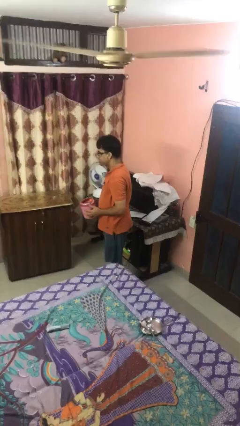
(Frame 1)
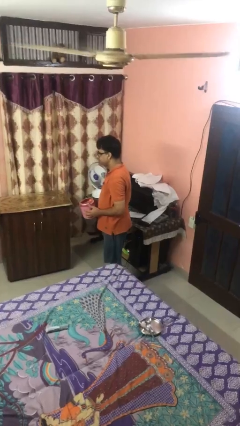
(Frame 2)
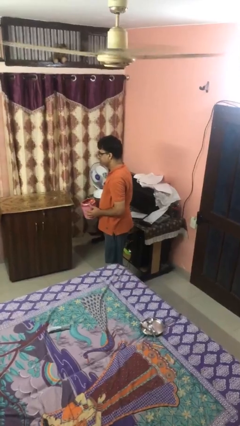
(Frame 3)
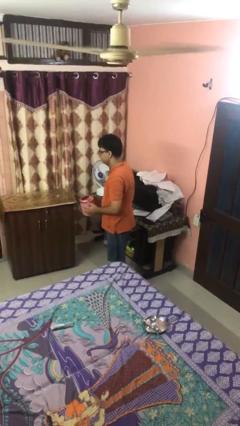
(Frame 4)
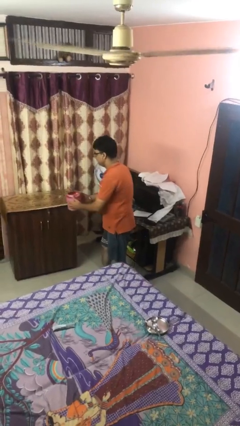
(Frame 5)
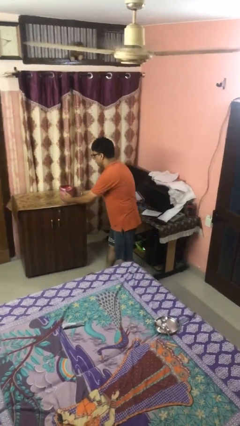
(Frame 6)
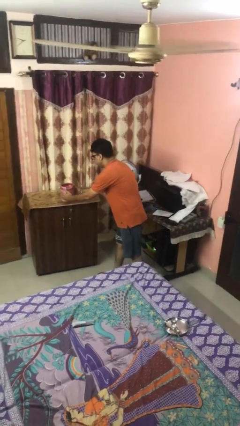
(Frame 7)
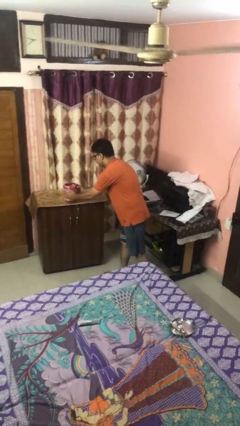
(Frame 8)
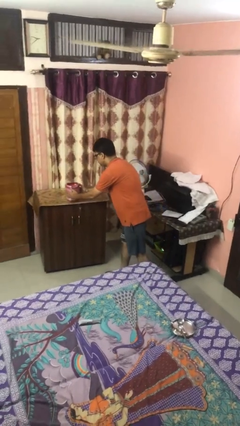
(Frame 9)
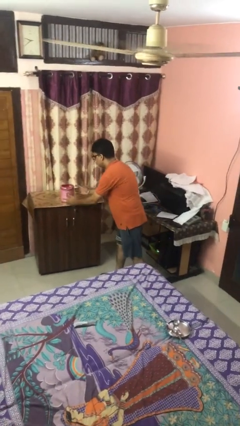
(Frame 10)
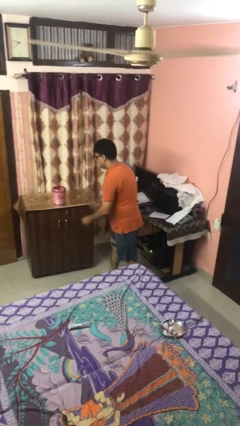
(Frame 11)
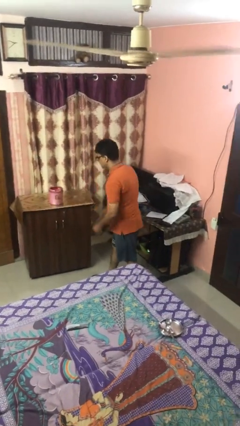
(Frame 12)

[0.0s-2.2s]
person puts down object on countertop

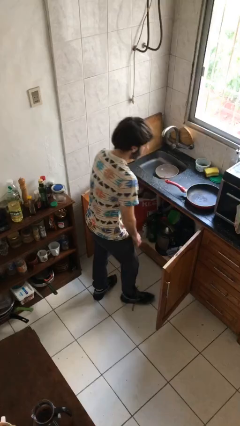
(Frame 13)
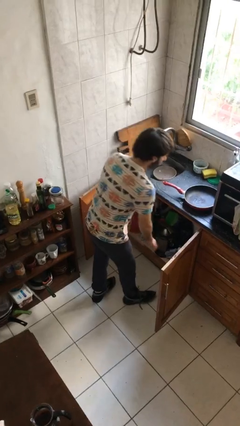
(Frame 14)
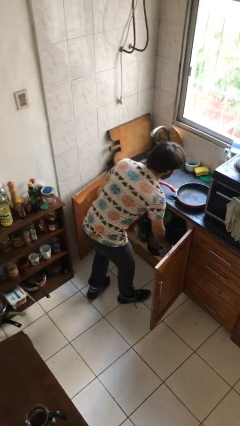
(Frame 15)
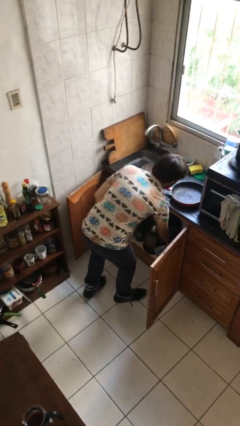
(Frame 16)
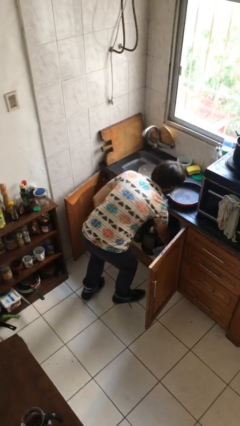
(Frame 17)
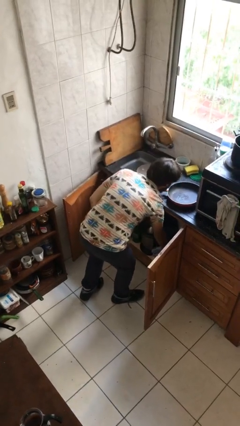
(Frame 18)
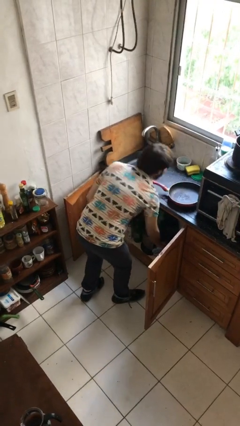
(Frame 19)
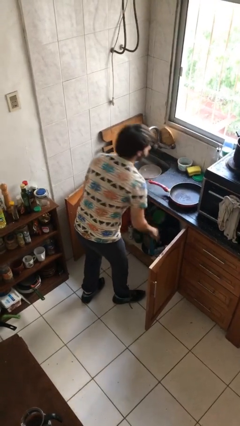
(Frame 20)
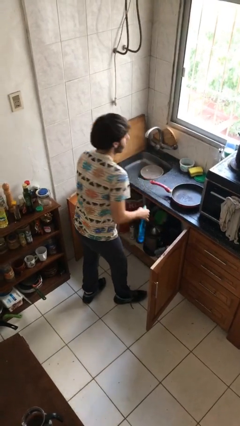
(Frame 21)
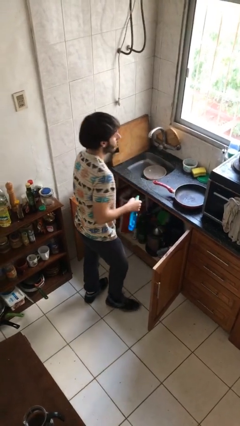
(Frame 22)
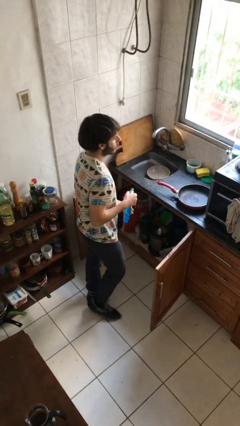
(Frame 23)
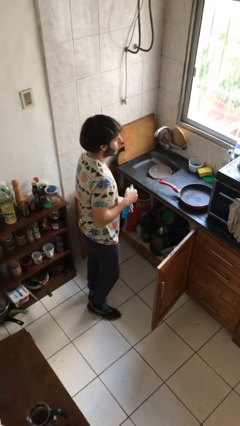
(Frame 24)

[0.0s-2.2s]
person picks up object from cabinet

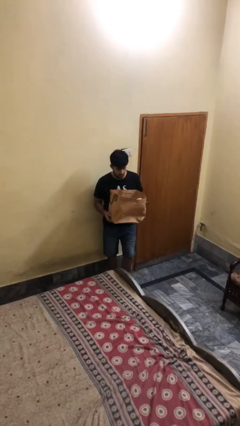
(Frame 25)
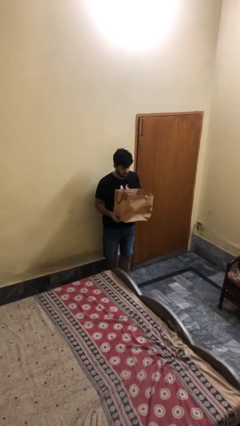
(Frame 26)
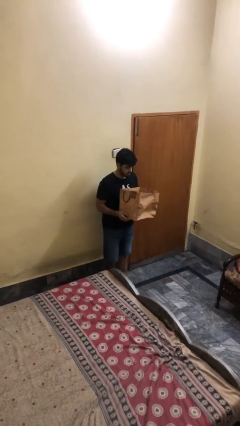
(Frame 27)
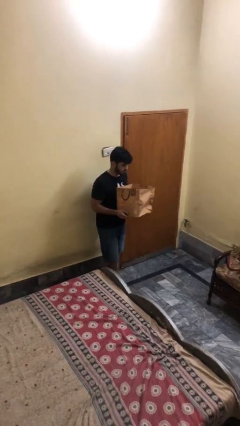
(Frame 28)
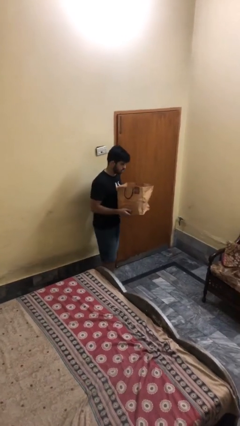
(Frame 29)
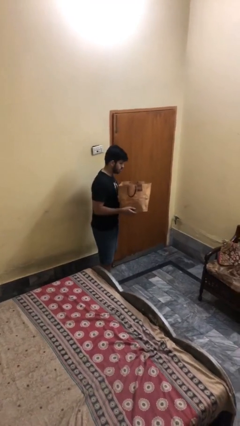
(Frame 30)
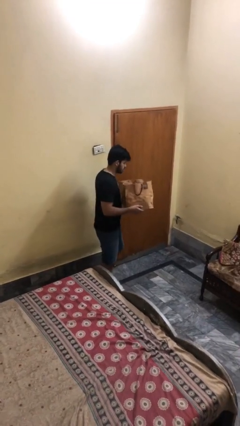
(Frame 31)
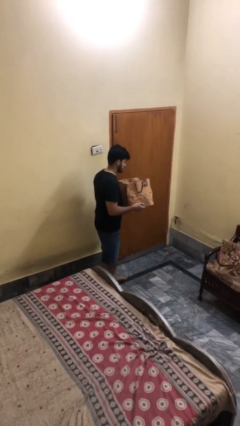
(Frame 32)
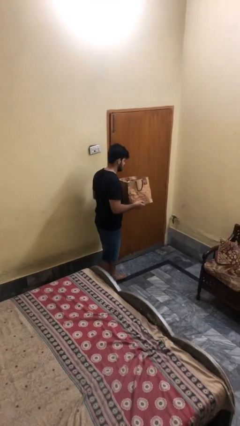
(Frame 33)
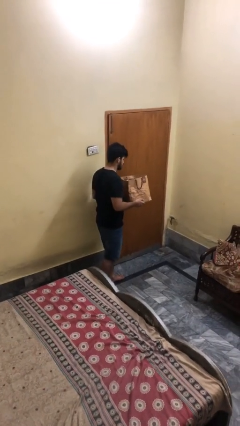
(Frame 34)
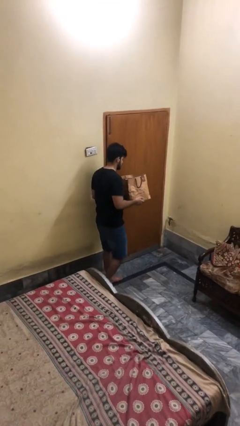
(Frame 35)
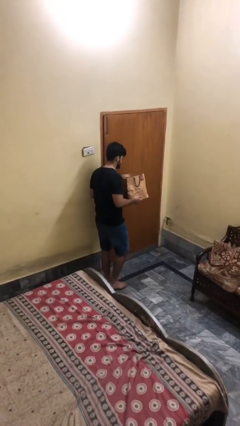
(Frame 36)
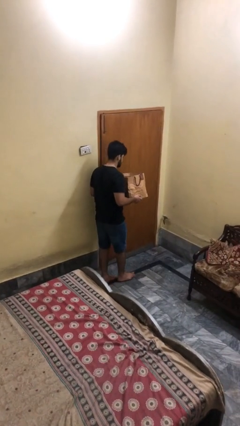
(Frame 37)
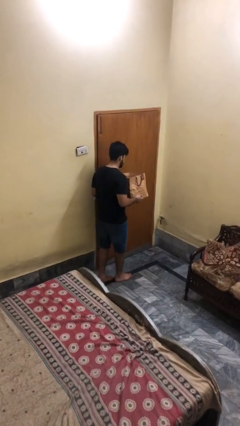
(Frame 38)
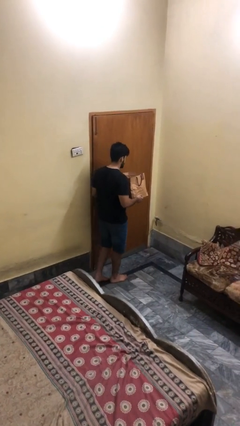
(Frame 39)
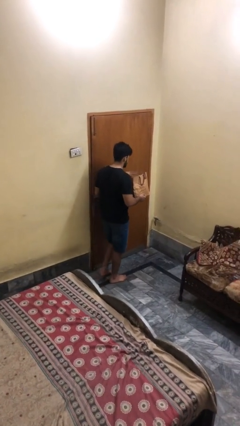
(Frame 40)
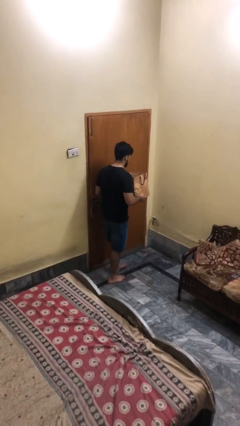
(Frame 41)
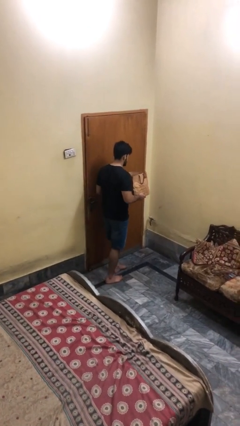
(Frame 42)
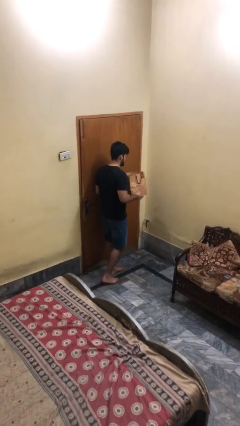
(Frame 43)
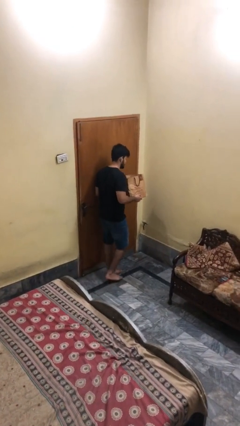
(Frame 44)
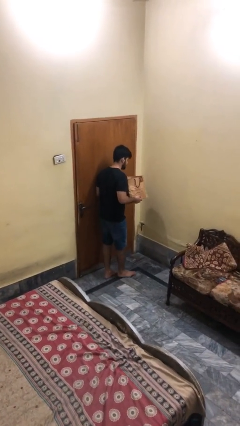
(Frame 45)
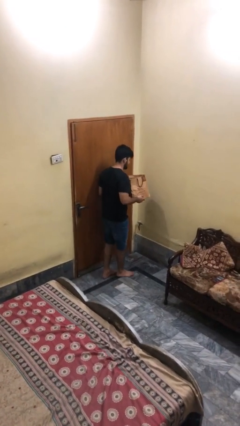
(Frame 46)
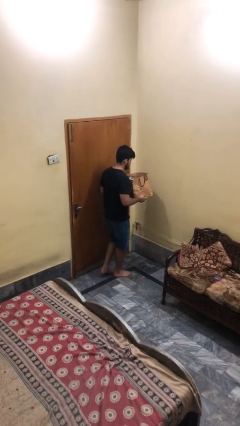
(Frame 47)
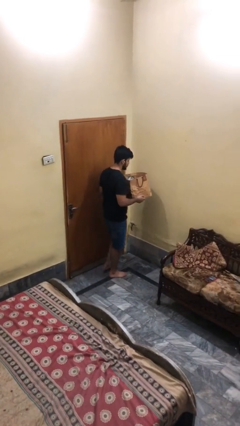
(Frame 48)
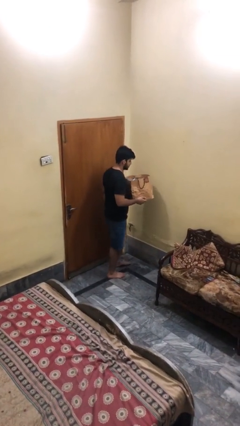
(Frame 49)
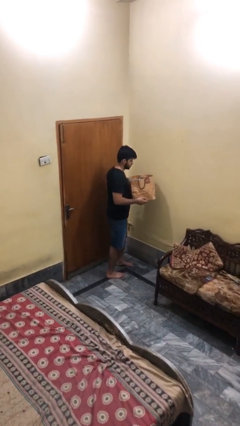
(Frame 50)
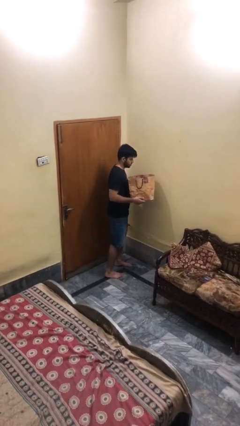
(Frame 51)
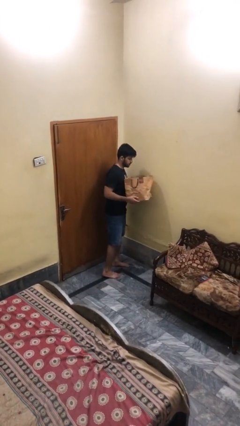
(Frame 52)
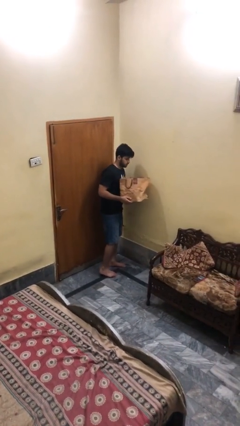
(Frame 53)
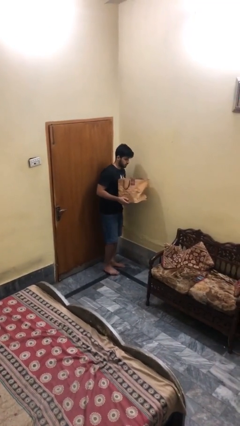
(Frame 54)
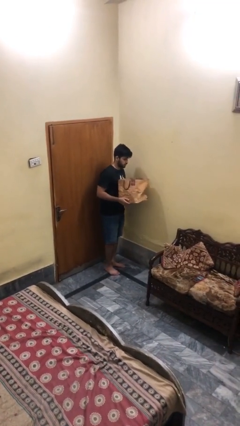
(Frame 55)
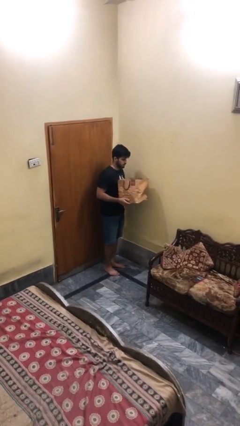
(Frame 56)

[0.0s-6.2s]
person carries groceries

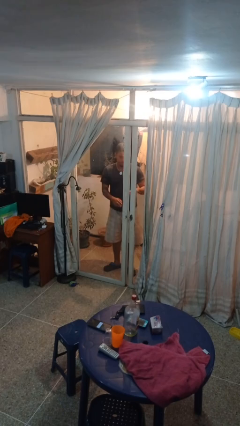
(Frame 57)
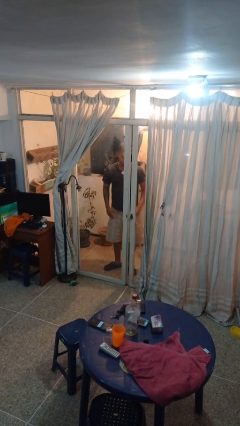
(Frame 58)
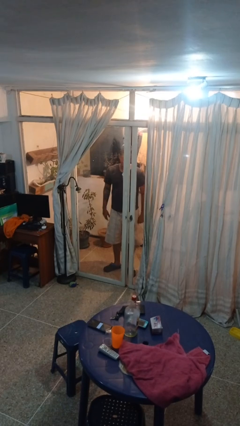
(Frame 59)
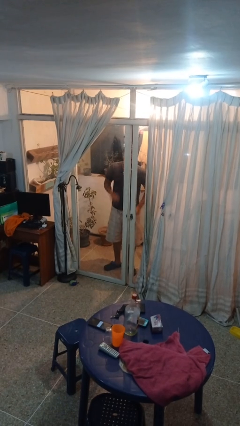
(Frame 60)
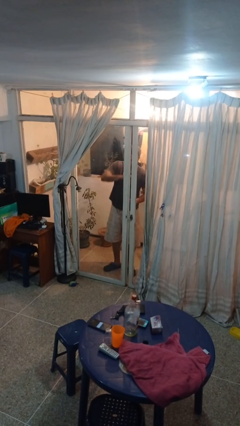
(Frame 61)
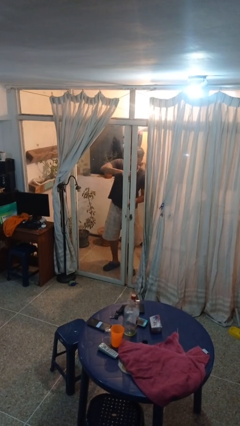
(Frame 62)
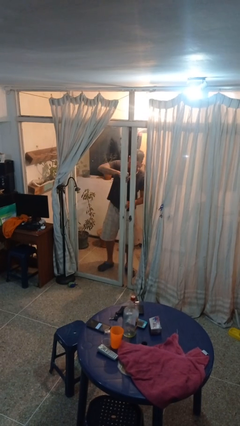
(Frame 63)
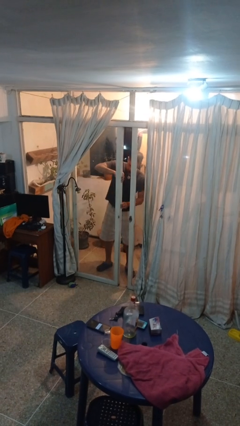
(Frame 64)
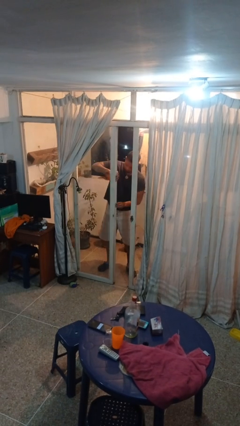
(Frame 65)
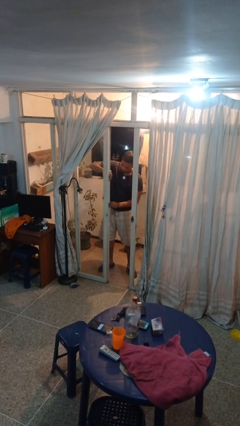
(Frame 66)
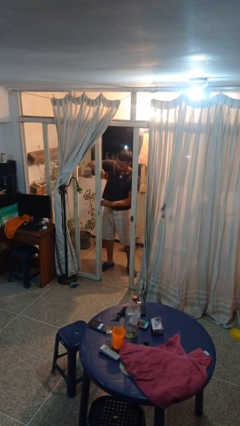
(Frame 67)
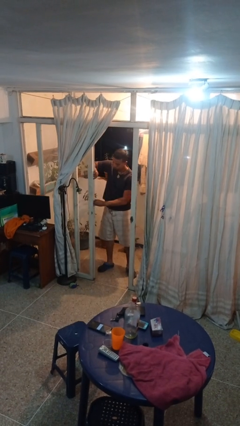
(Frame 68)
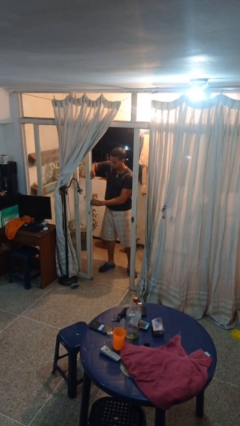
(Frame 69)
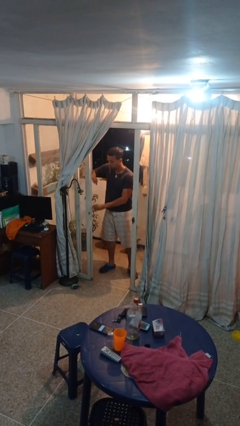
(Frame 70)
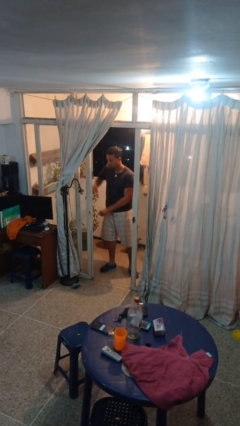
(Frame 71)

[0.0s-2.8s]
person opens sliding door

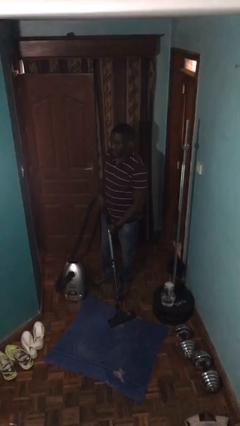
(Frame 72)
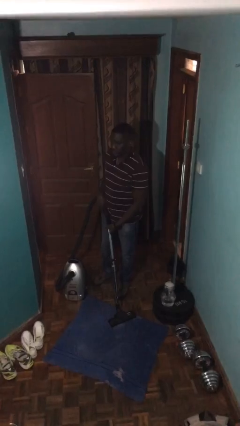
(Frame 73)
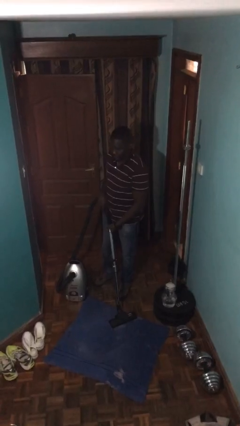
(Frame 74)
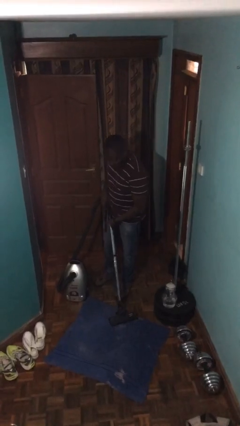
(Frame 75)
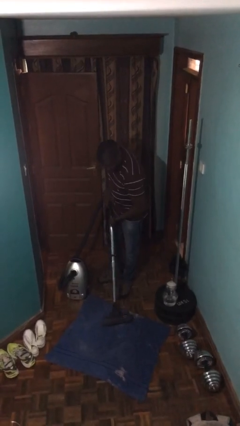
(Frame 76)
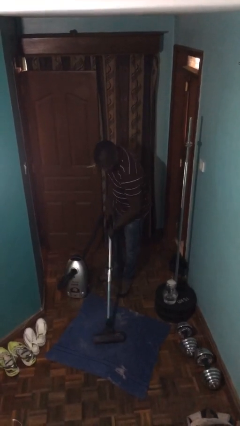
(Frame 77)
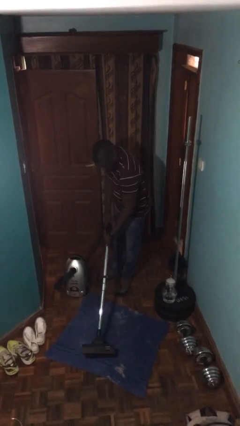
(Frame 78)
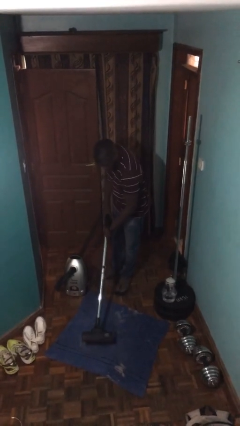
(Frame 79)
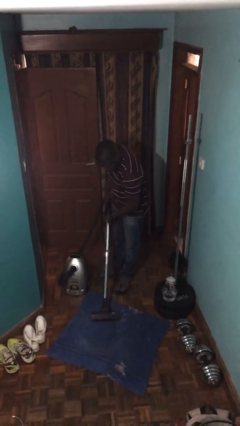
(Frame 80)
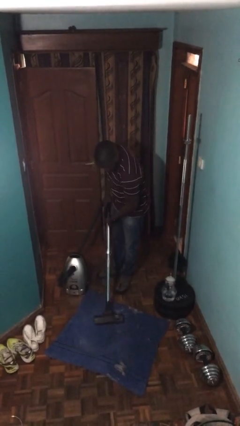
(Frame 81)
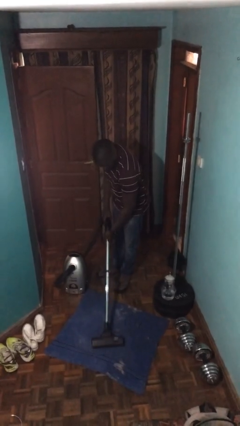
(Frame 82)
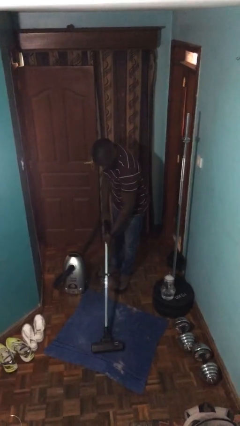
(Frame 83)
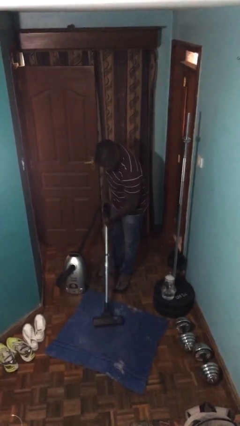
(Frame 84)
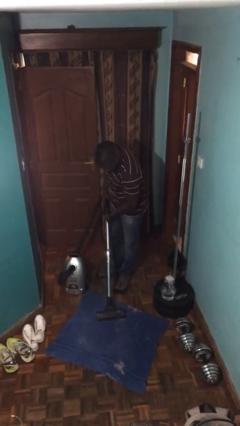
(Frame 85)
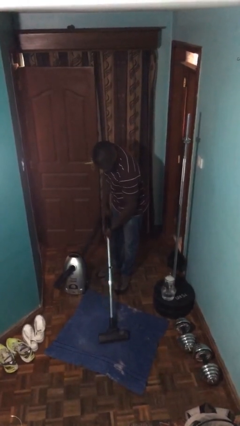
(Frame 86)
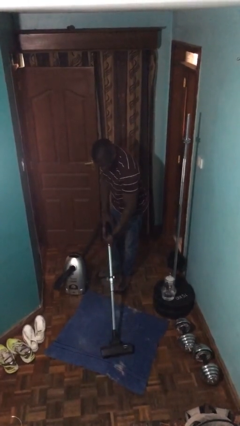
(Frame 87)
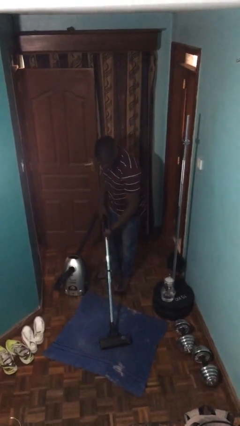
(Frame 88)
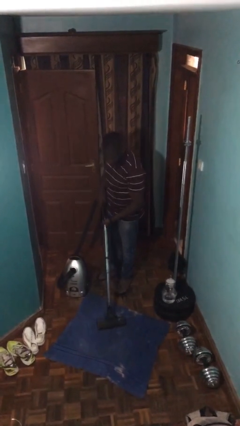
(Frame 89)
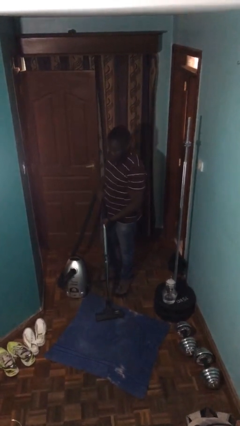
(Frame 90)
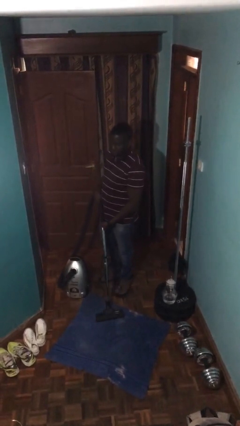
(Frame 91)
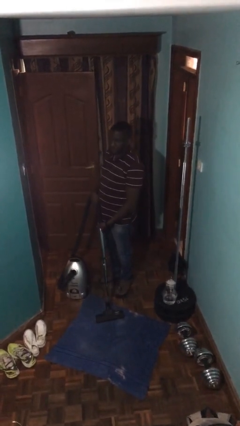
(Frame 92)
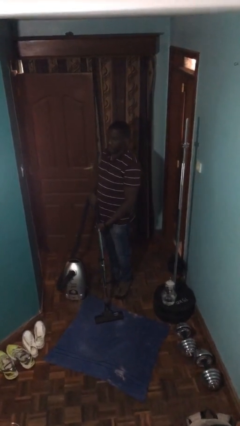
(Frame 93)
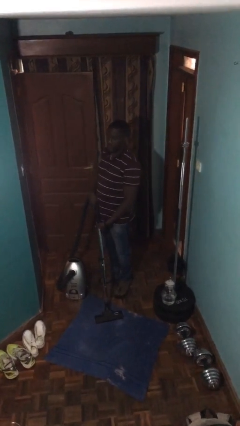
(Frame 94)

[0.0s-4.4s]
person vacuums carpet
